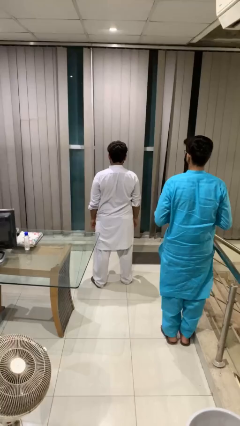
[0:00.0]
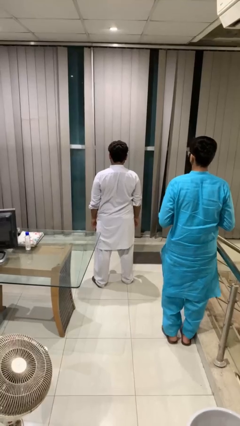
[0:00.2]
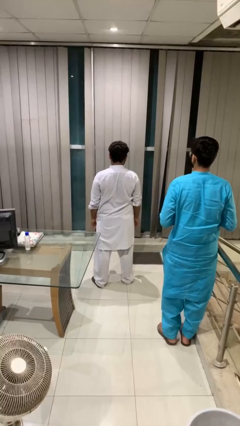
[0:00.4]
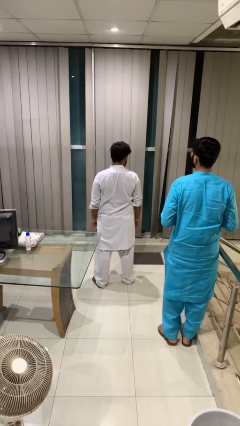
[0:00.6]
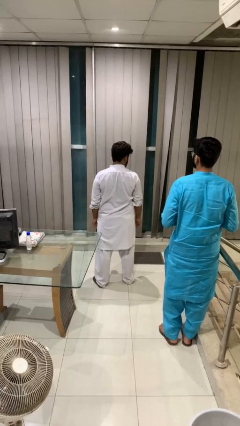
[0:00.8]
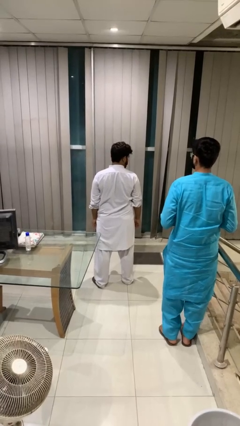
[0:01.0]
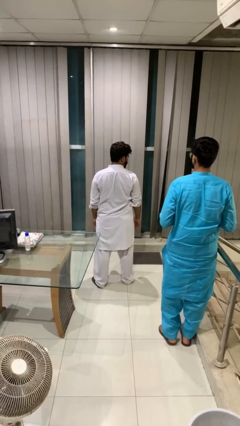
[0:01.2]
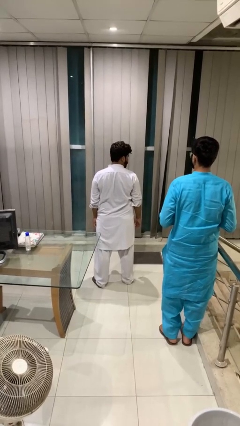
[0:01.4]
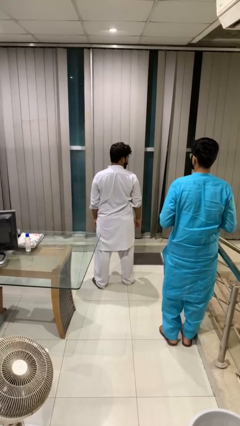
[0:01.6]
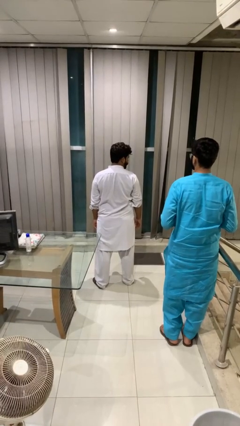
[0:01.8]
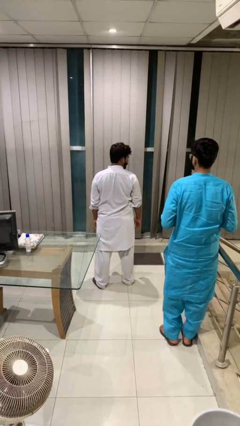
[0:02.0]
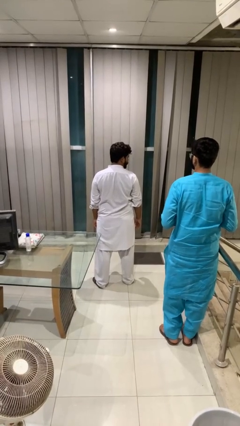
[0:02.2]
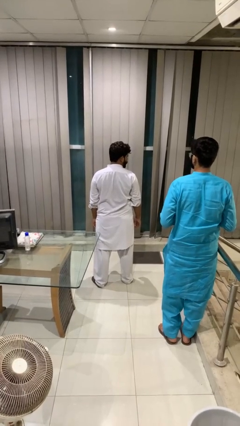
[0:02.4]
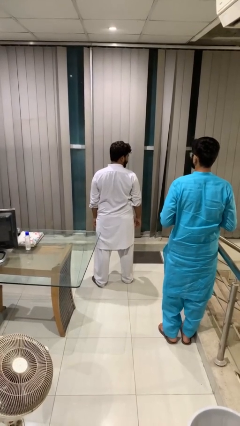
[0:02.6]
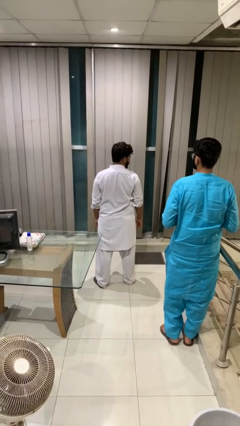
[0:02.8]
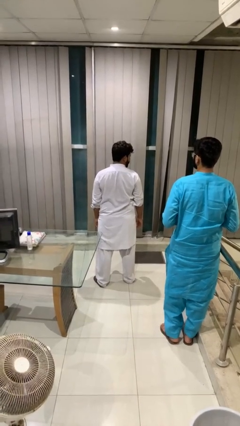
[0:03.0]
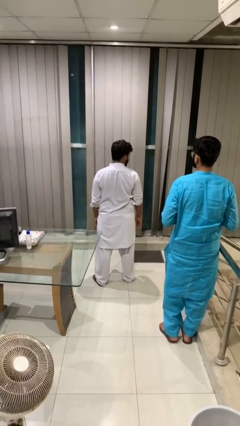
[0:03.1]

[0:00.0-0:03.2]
person looks over shoulder

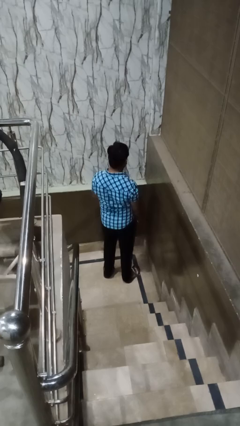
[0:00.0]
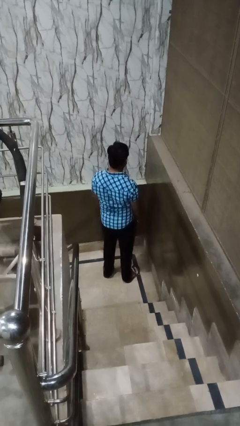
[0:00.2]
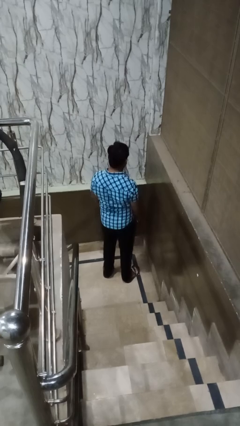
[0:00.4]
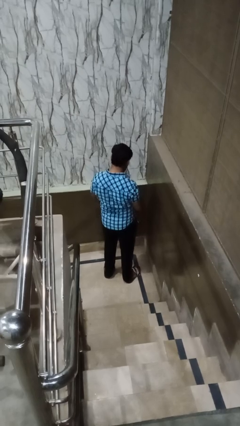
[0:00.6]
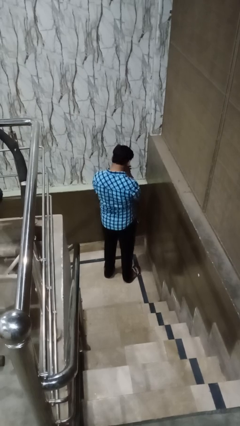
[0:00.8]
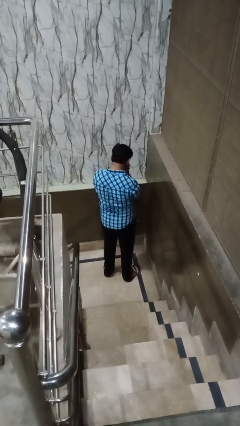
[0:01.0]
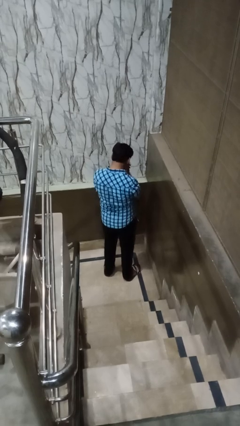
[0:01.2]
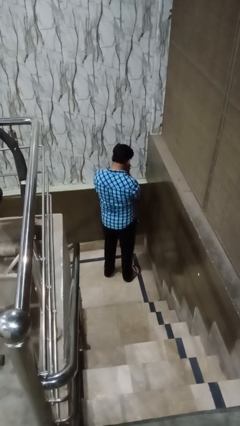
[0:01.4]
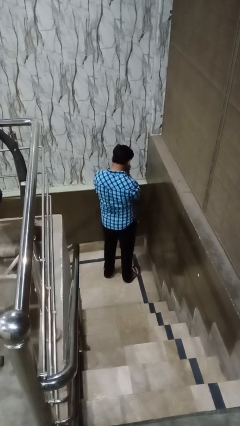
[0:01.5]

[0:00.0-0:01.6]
person sneezes into hand

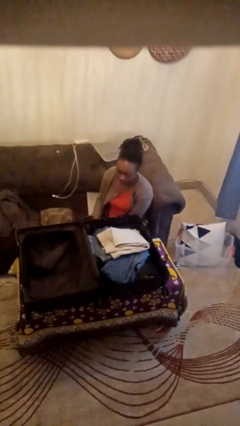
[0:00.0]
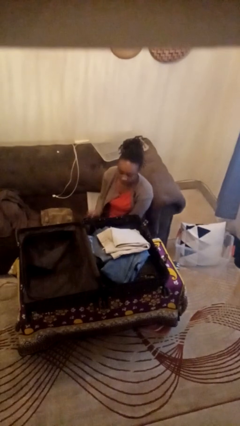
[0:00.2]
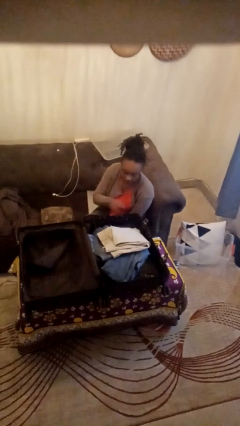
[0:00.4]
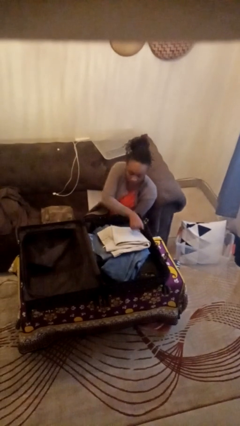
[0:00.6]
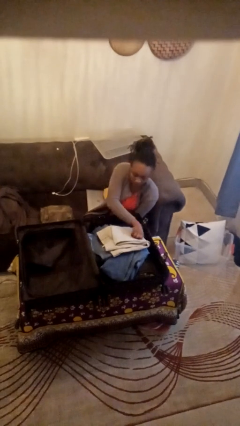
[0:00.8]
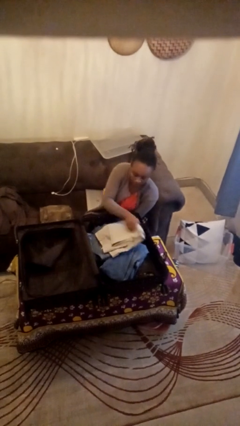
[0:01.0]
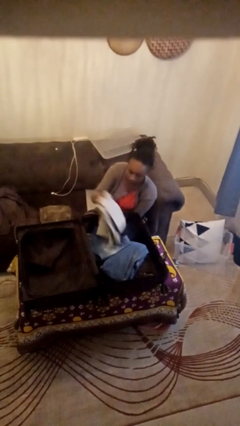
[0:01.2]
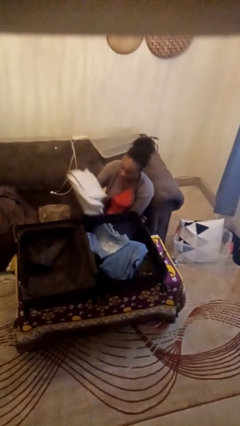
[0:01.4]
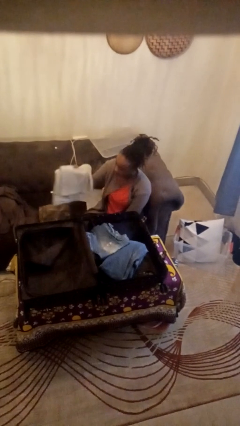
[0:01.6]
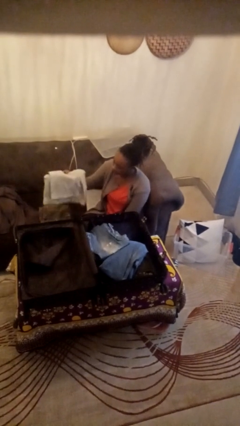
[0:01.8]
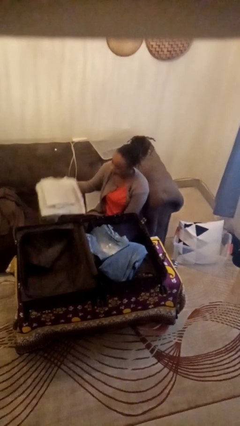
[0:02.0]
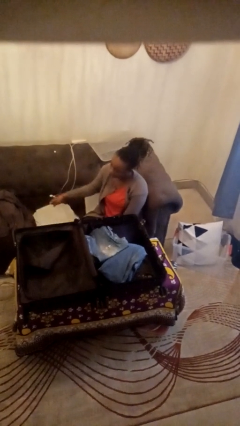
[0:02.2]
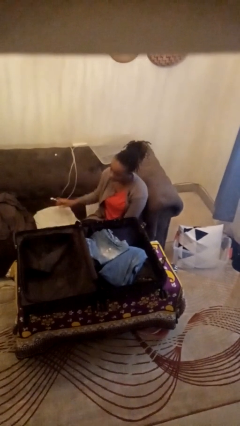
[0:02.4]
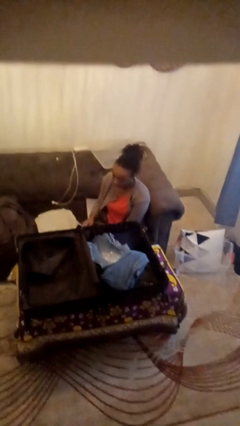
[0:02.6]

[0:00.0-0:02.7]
person unloads clothes from suitcase

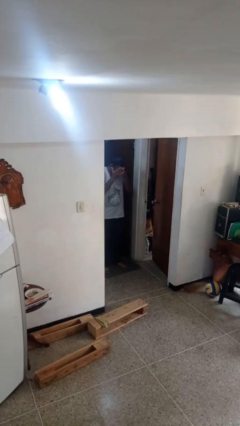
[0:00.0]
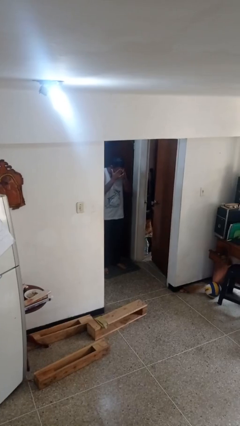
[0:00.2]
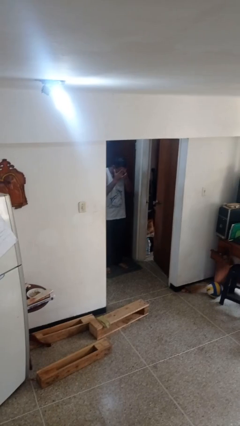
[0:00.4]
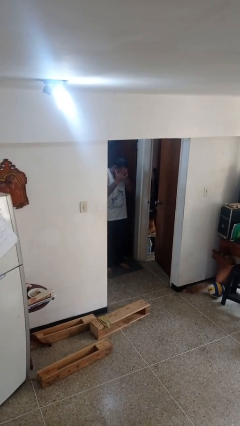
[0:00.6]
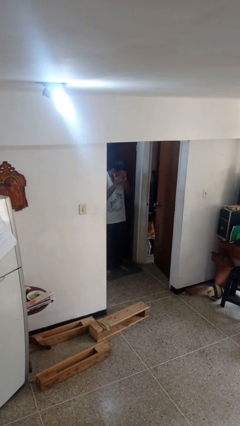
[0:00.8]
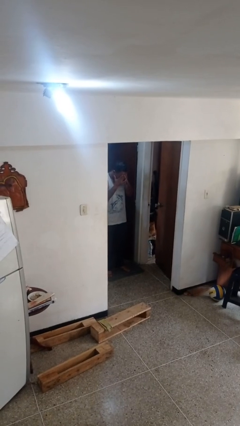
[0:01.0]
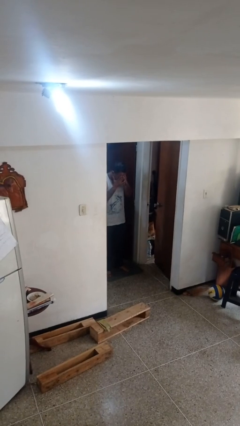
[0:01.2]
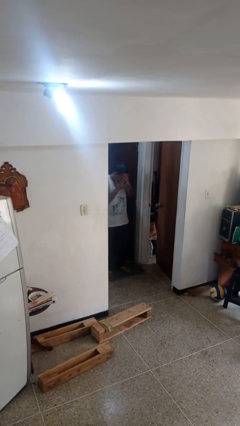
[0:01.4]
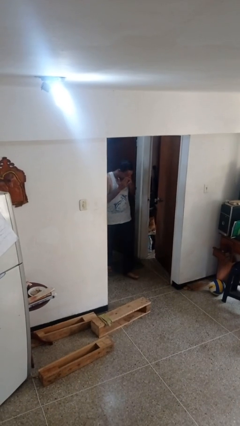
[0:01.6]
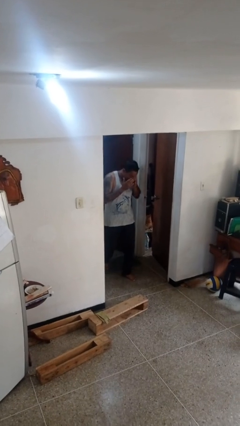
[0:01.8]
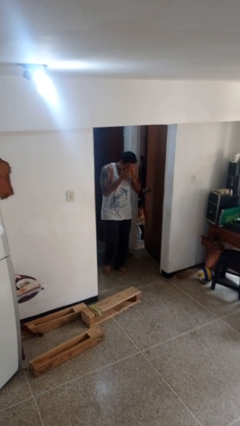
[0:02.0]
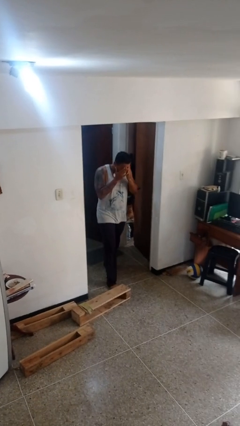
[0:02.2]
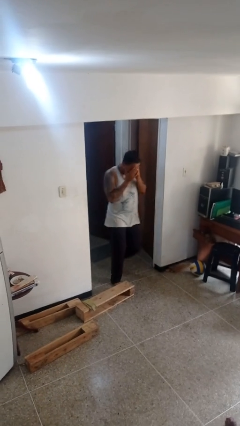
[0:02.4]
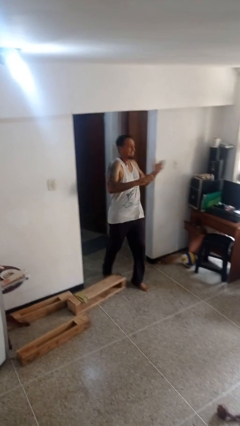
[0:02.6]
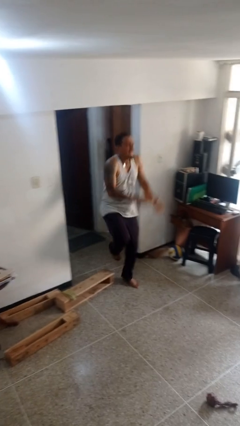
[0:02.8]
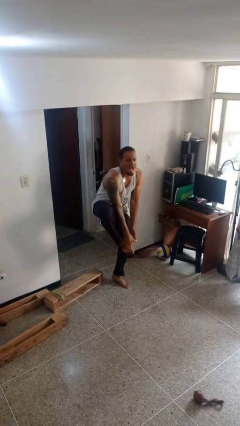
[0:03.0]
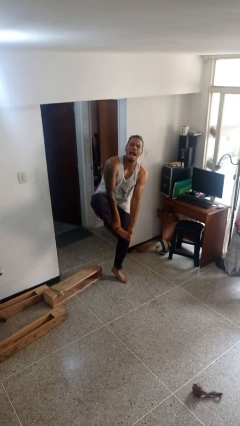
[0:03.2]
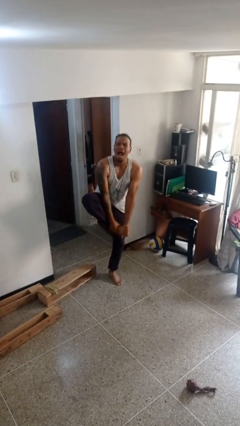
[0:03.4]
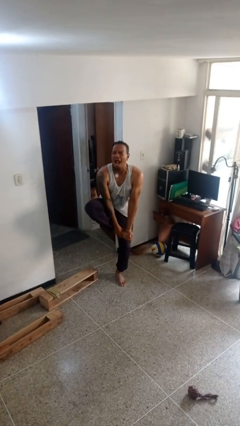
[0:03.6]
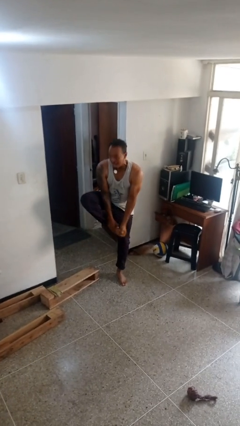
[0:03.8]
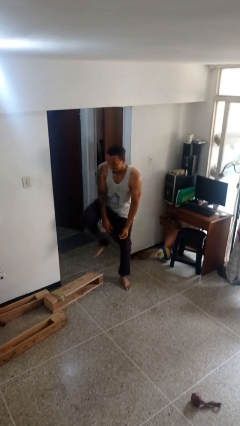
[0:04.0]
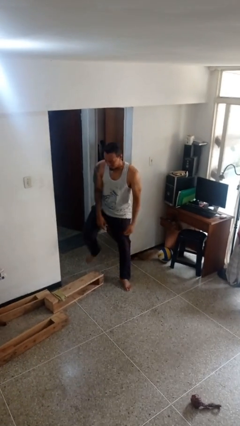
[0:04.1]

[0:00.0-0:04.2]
person stubs toe

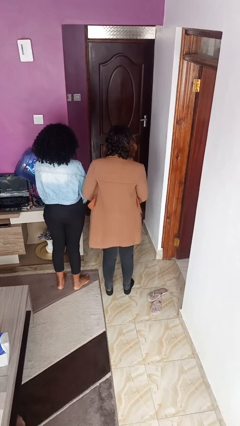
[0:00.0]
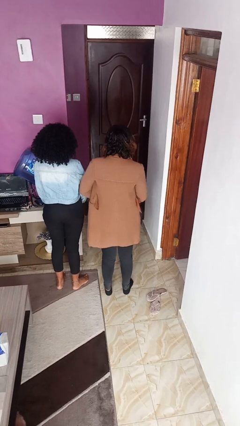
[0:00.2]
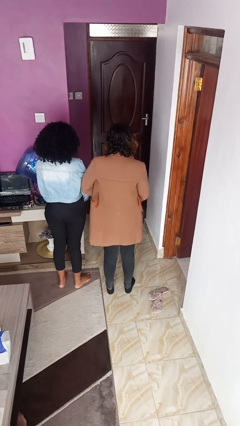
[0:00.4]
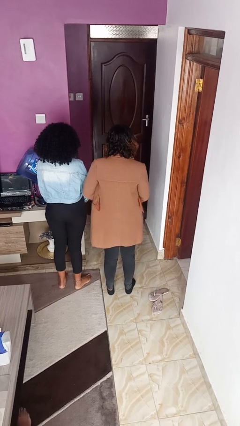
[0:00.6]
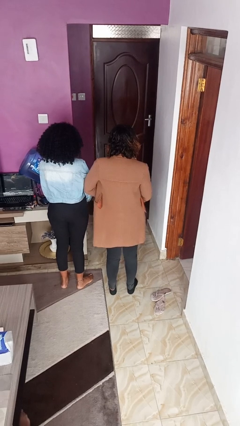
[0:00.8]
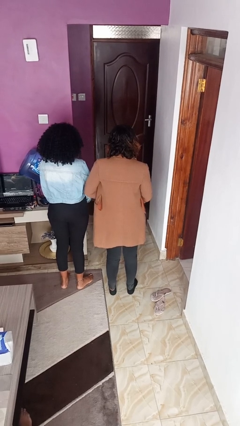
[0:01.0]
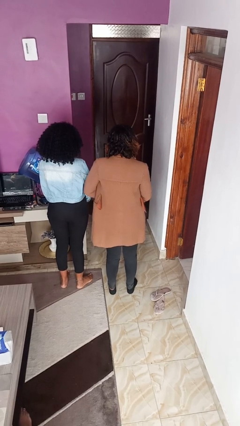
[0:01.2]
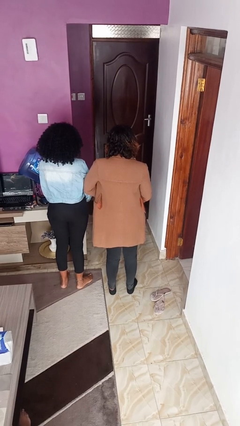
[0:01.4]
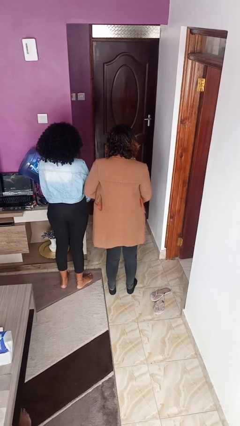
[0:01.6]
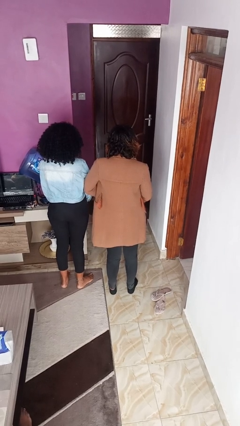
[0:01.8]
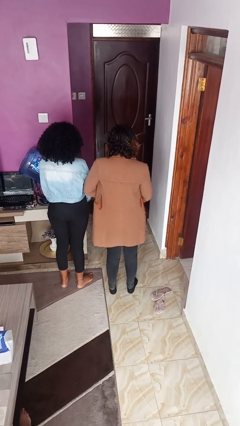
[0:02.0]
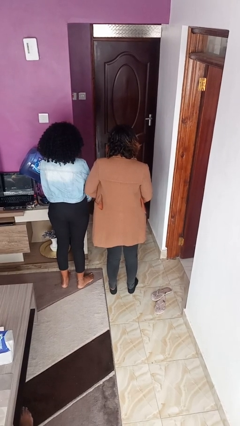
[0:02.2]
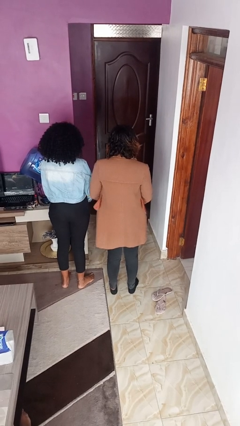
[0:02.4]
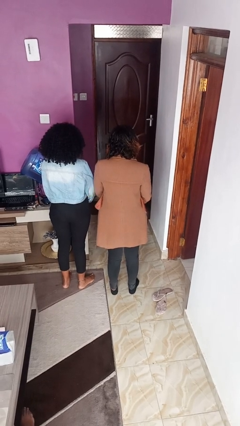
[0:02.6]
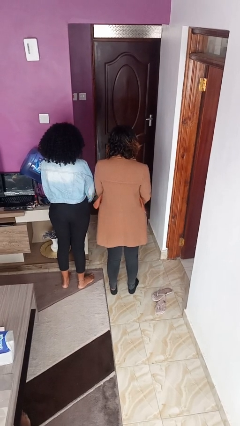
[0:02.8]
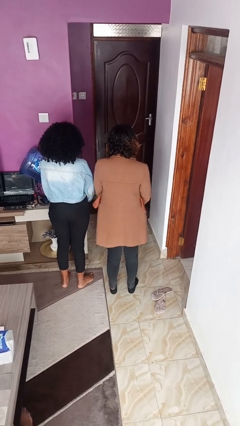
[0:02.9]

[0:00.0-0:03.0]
person nudges person with elbow

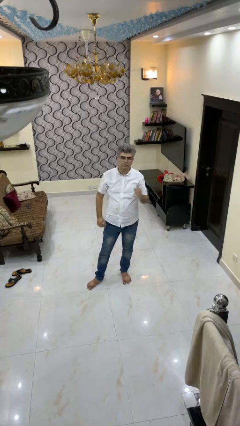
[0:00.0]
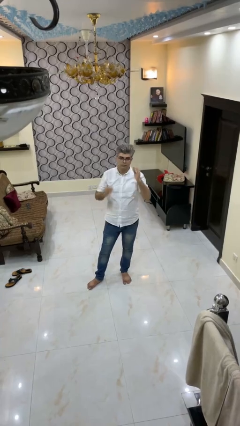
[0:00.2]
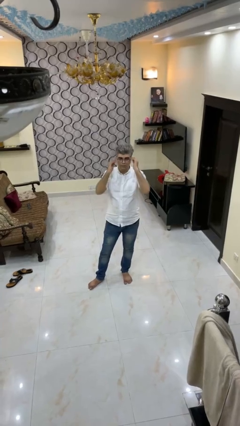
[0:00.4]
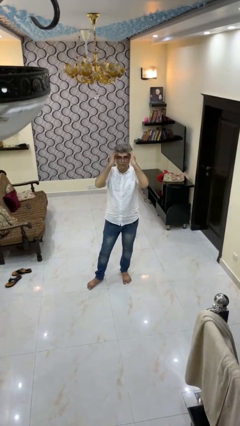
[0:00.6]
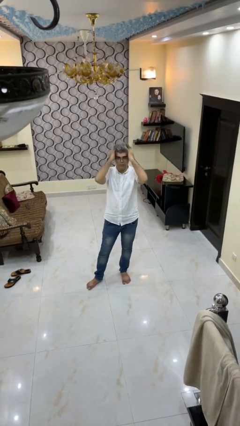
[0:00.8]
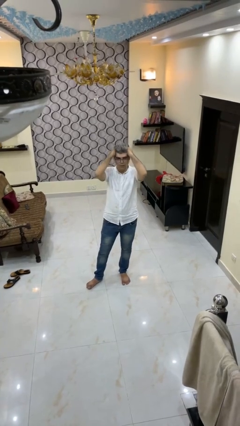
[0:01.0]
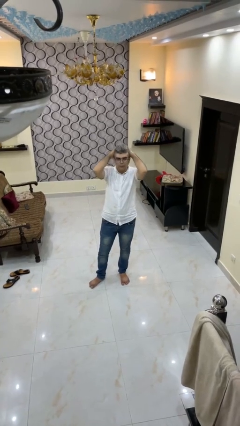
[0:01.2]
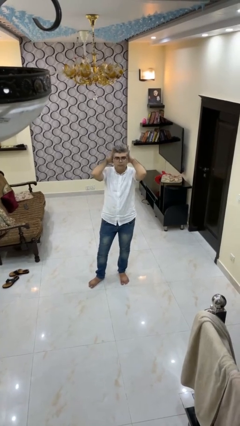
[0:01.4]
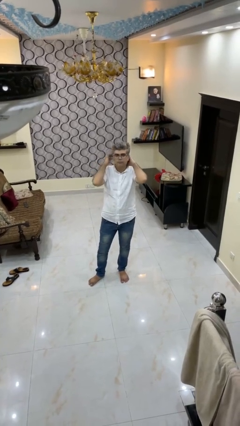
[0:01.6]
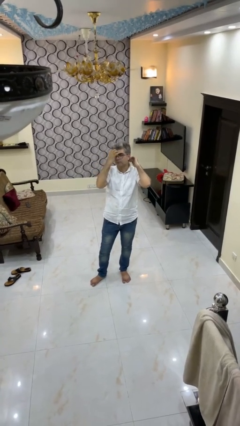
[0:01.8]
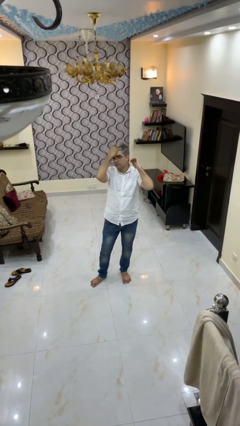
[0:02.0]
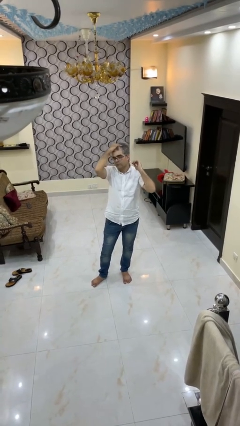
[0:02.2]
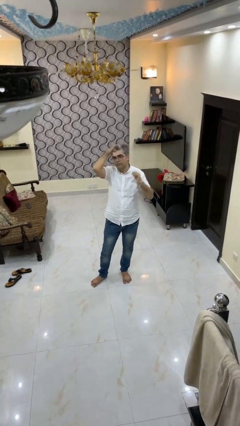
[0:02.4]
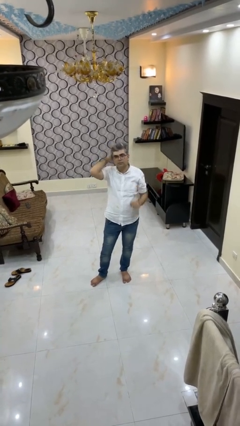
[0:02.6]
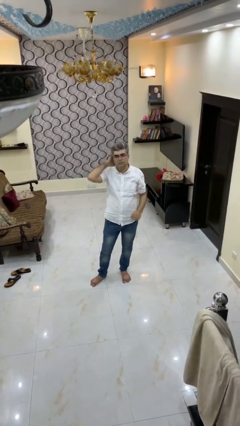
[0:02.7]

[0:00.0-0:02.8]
person strokes hair
